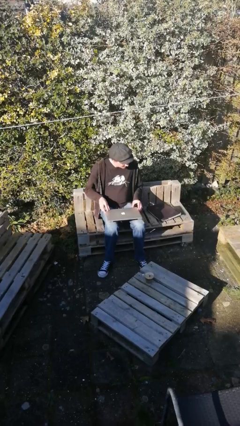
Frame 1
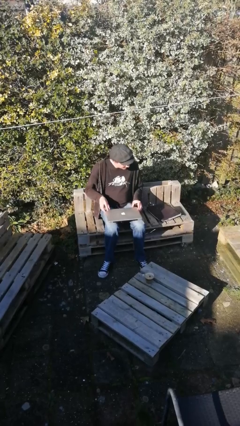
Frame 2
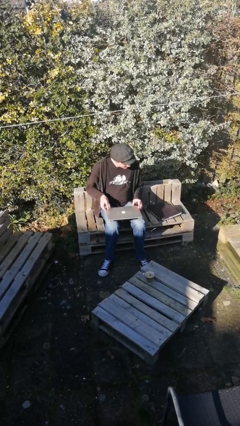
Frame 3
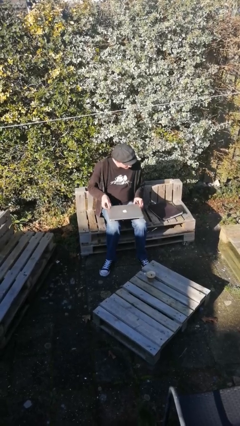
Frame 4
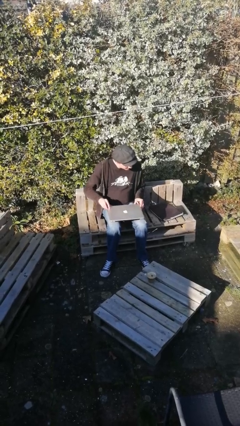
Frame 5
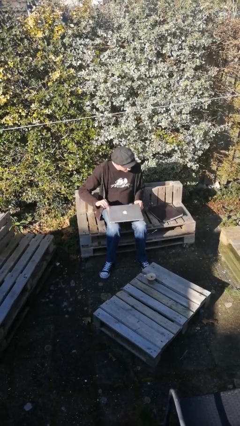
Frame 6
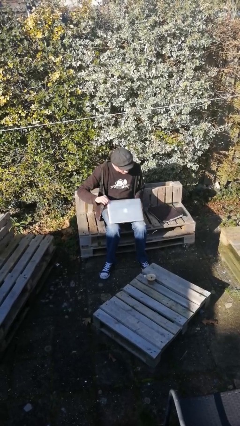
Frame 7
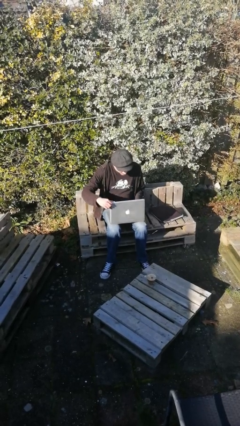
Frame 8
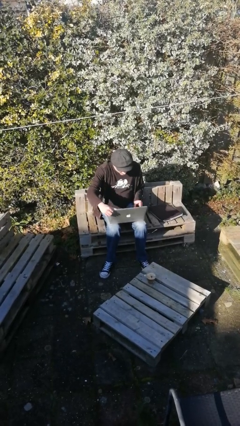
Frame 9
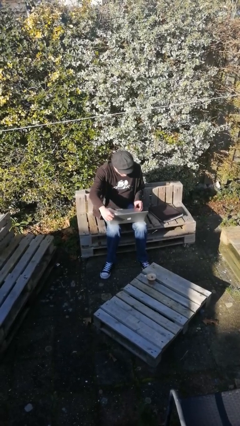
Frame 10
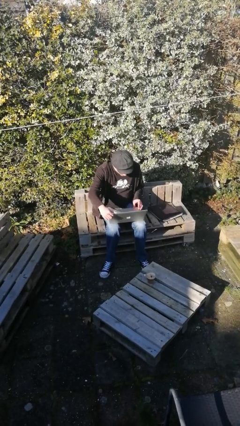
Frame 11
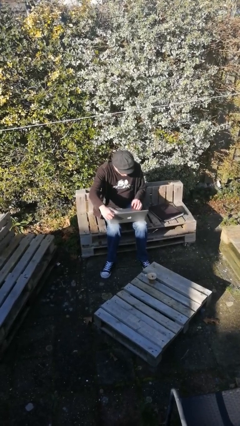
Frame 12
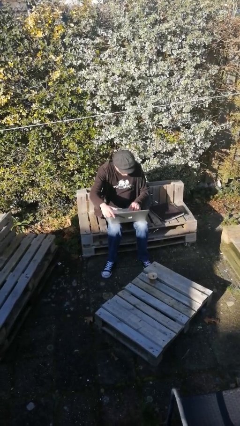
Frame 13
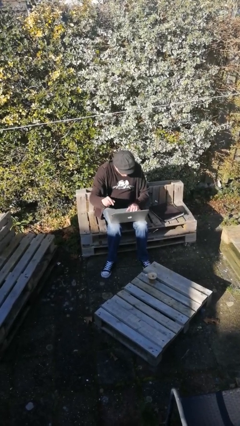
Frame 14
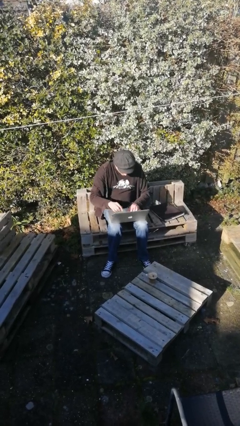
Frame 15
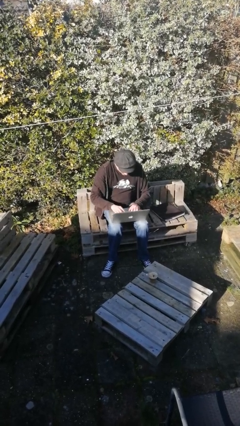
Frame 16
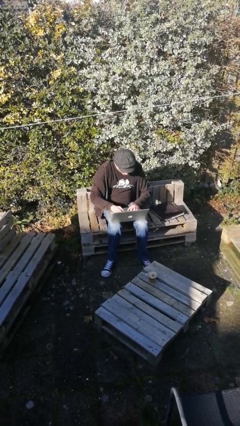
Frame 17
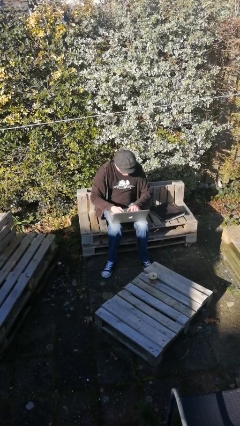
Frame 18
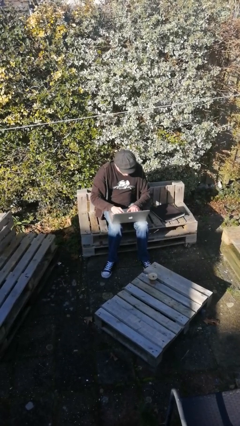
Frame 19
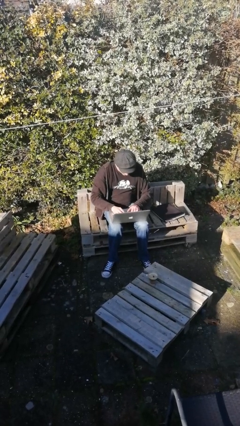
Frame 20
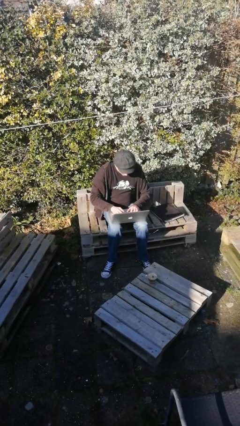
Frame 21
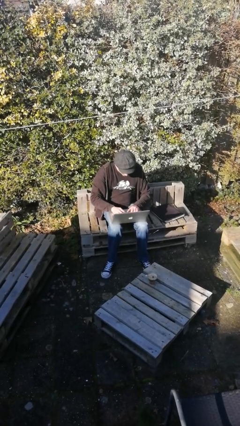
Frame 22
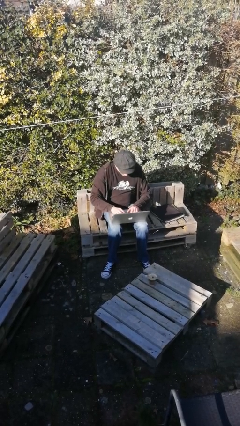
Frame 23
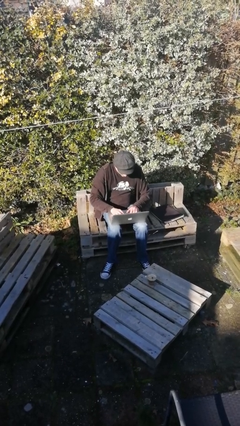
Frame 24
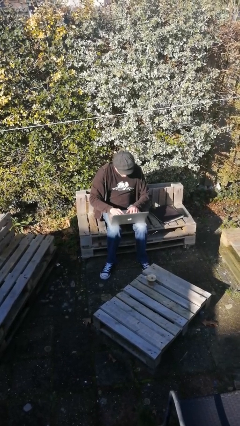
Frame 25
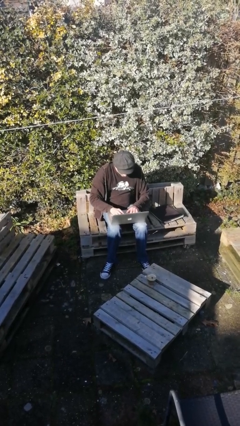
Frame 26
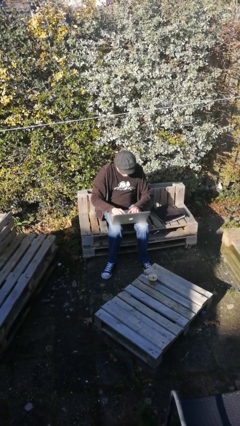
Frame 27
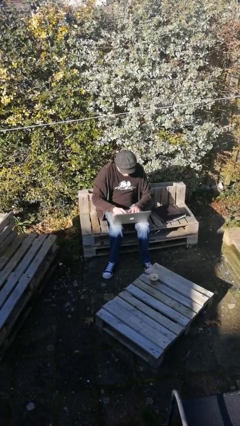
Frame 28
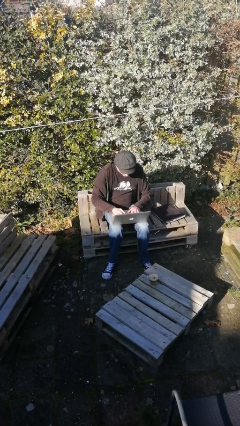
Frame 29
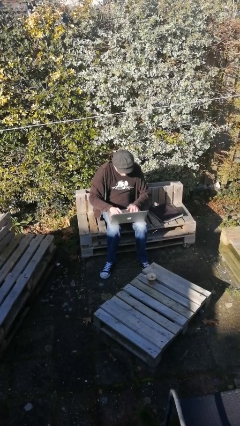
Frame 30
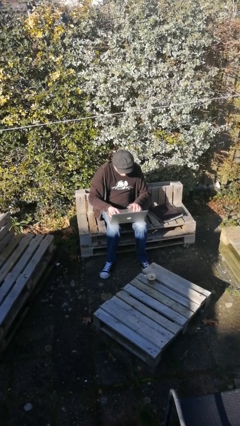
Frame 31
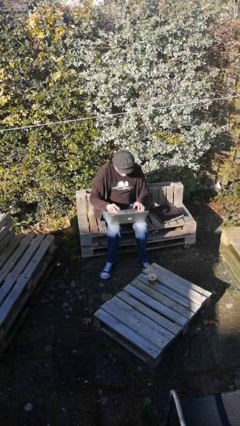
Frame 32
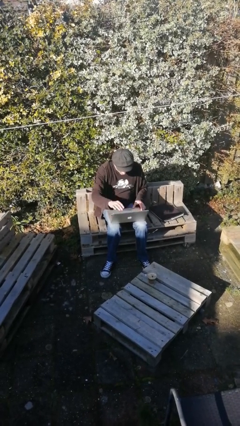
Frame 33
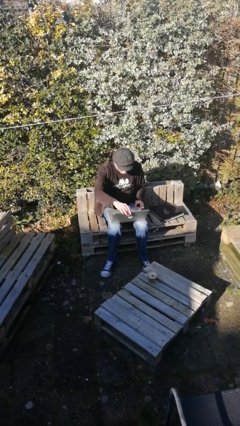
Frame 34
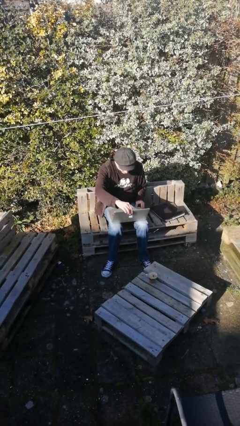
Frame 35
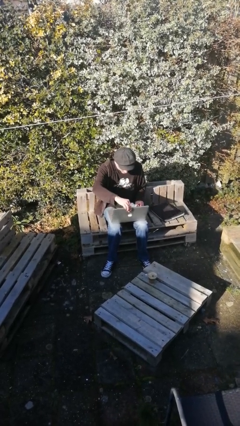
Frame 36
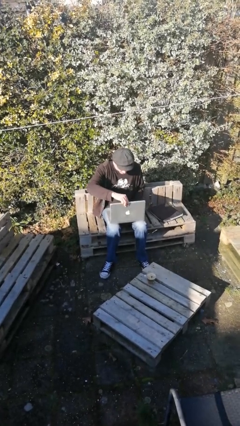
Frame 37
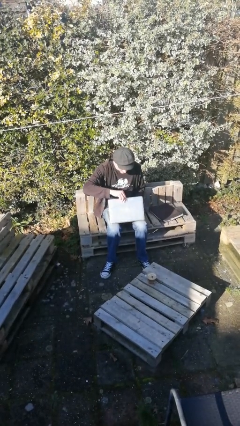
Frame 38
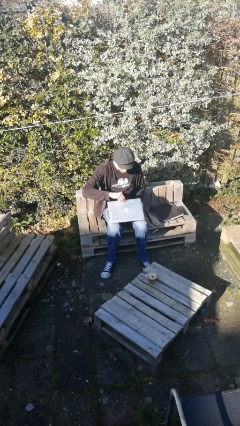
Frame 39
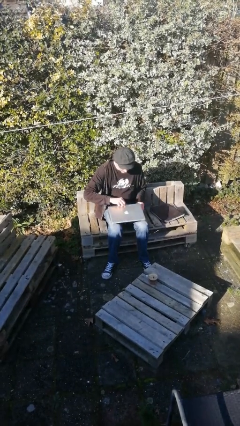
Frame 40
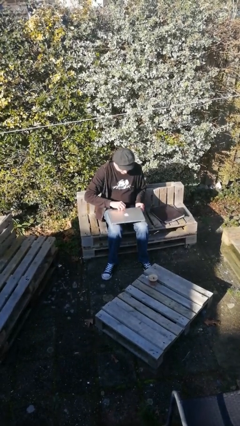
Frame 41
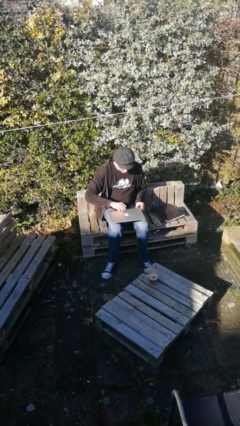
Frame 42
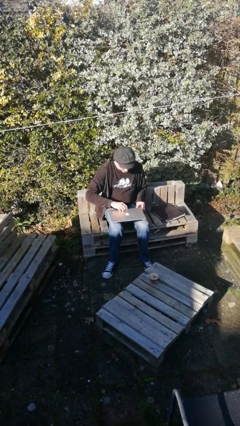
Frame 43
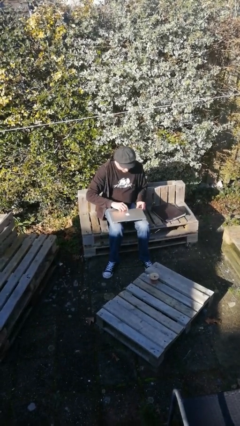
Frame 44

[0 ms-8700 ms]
person interacts with laptop

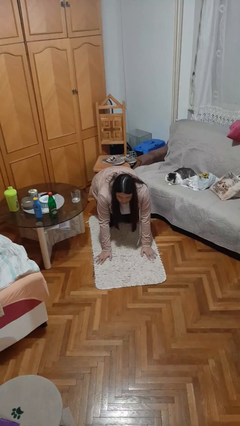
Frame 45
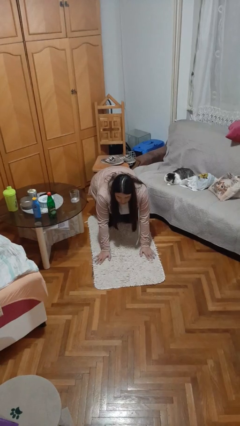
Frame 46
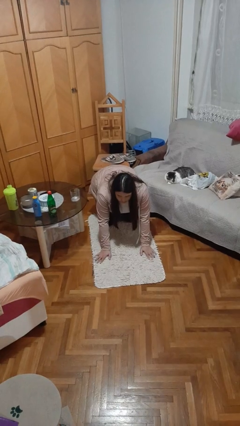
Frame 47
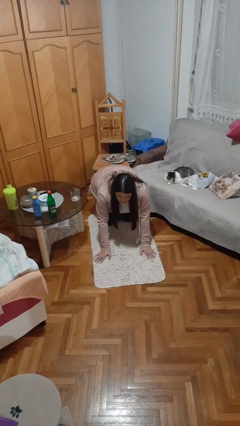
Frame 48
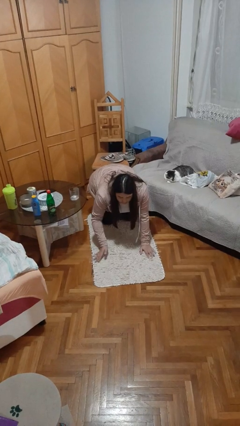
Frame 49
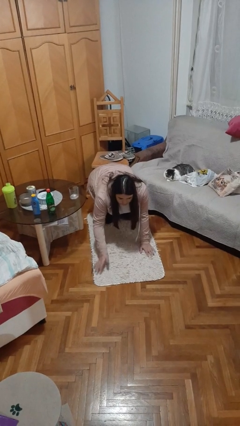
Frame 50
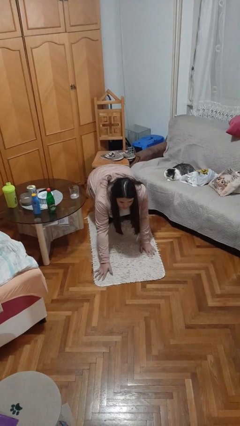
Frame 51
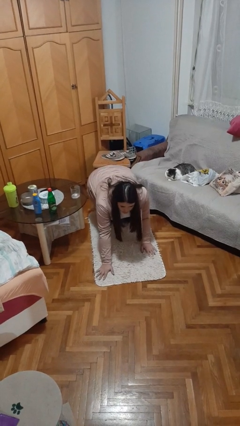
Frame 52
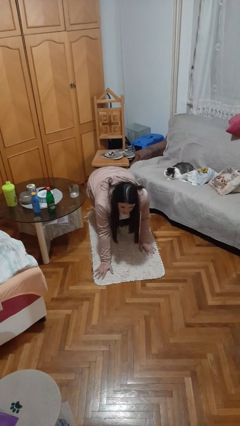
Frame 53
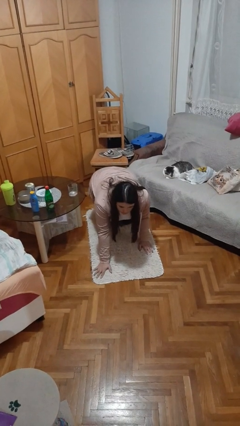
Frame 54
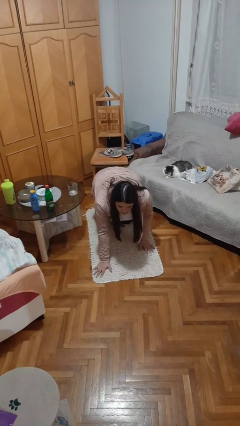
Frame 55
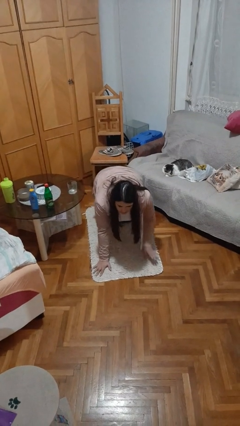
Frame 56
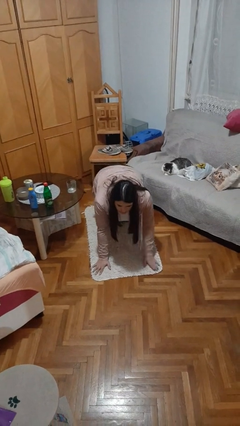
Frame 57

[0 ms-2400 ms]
person crawls

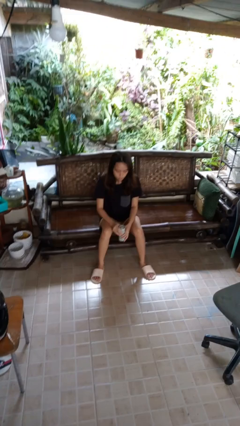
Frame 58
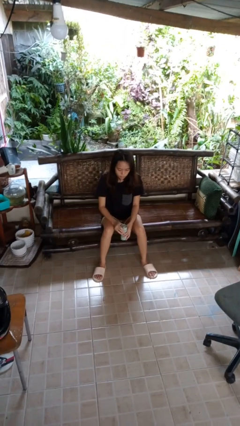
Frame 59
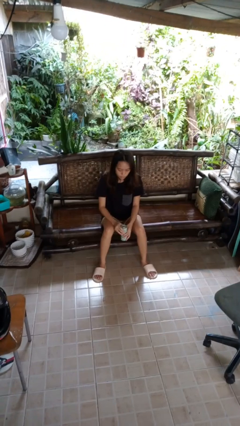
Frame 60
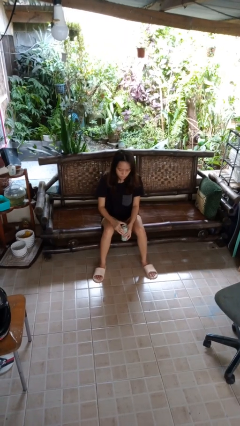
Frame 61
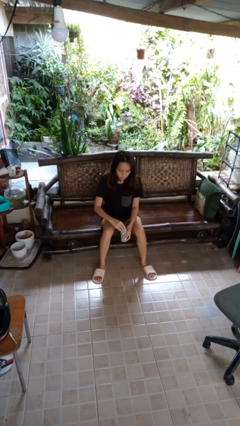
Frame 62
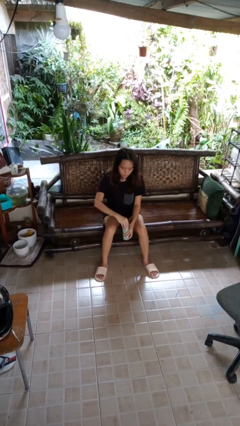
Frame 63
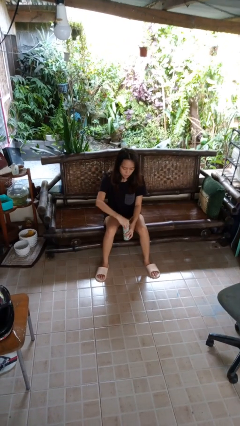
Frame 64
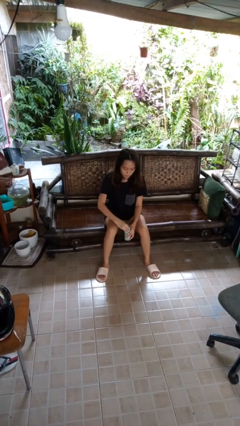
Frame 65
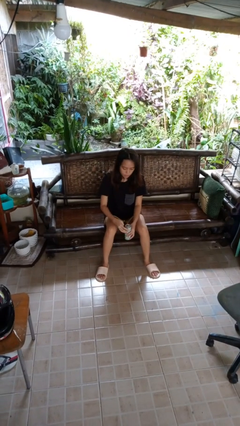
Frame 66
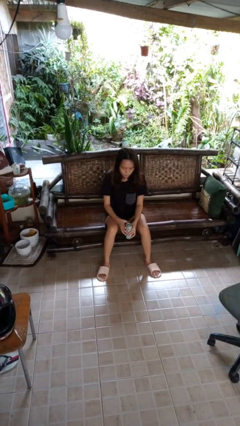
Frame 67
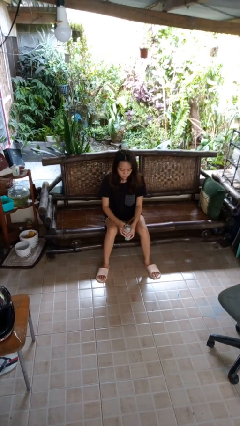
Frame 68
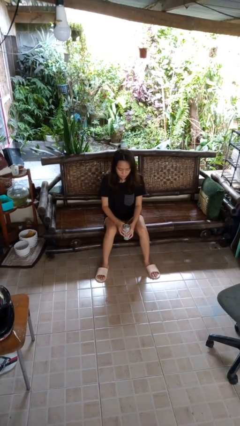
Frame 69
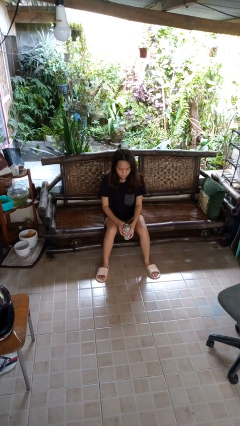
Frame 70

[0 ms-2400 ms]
person opens beverage can

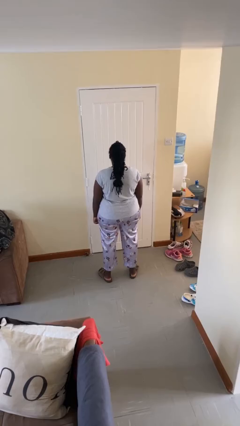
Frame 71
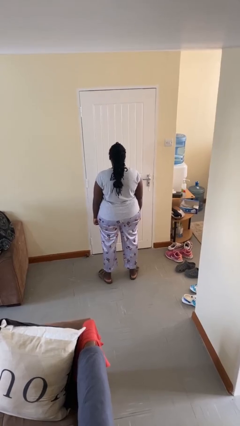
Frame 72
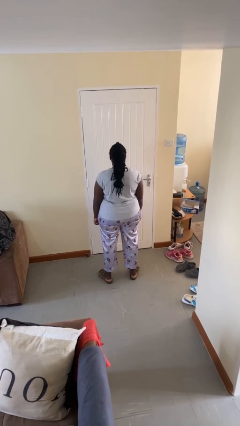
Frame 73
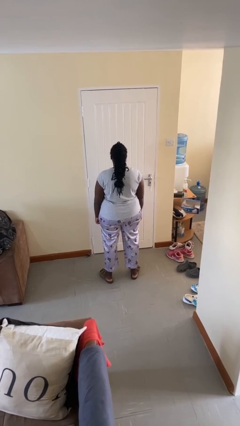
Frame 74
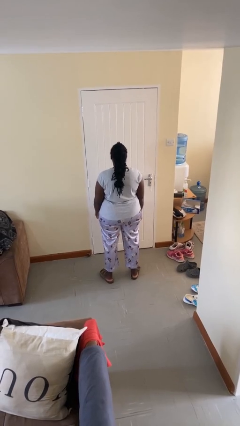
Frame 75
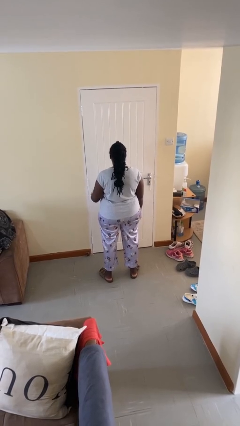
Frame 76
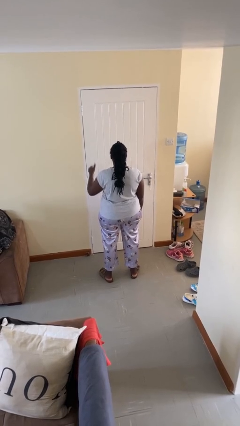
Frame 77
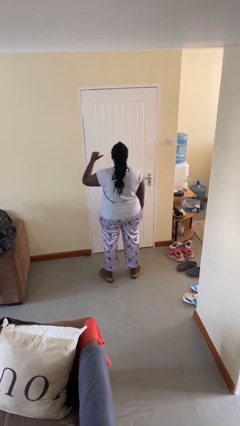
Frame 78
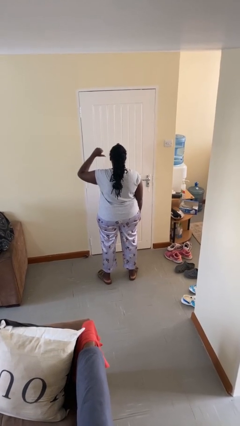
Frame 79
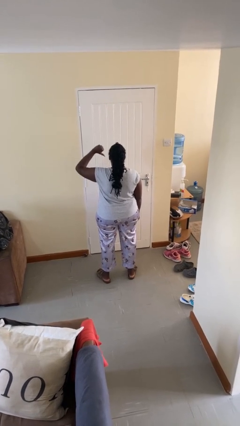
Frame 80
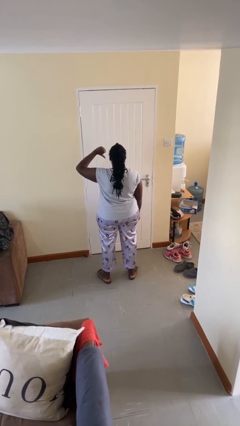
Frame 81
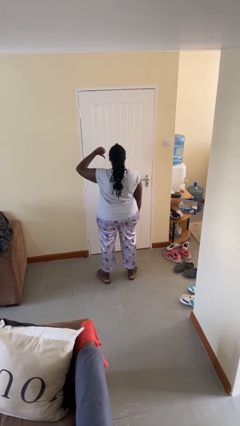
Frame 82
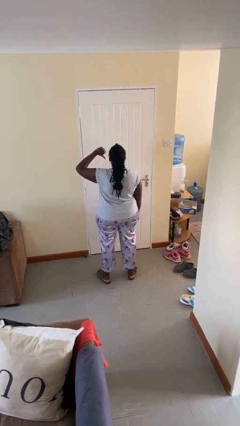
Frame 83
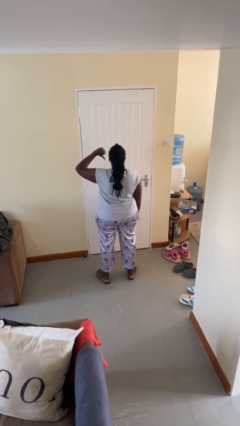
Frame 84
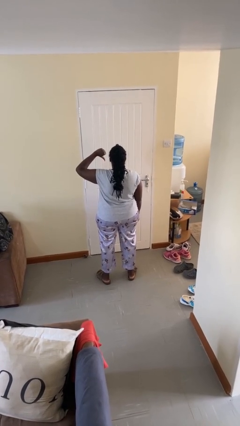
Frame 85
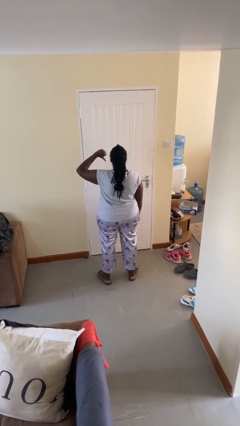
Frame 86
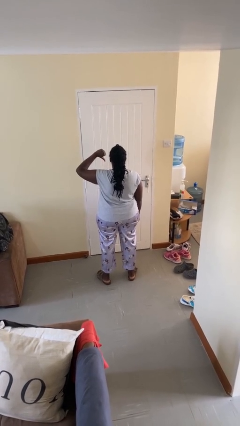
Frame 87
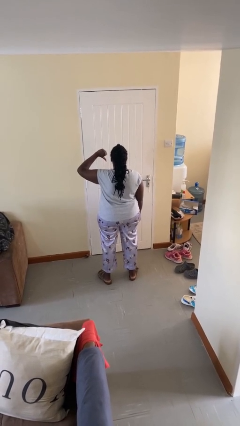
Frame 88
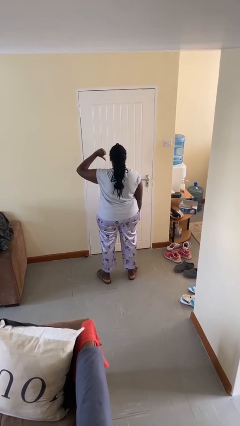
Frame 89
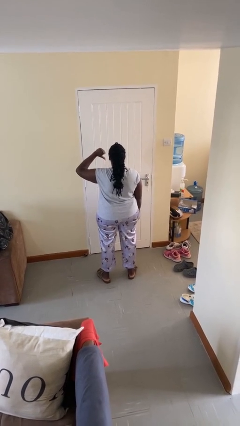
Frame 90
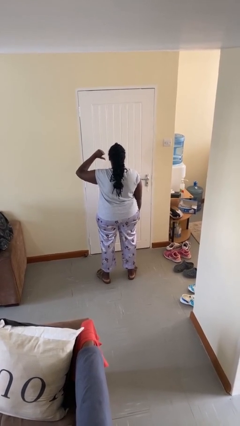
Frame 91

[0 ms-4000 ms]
person gestures thumbs down

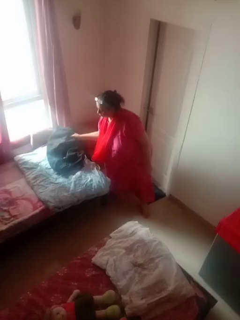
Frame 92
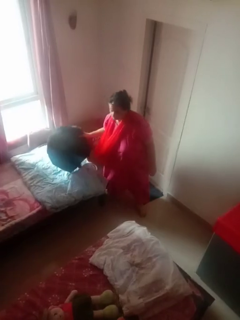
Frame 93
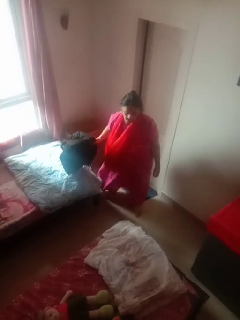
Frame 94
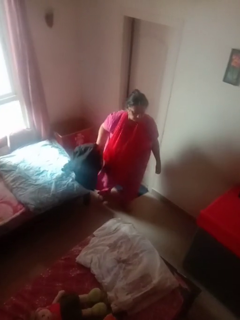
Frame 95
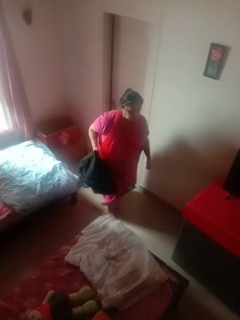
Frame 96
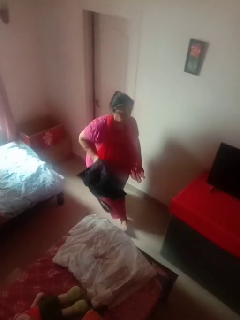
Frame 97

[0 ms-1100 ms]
person picks up object from bed
